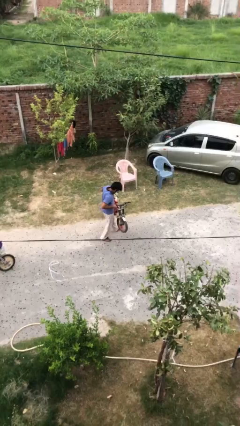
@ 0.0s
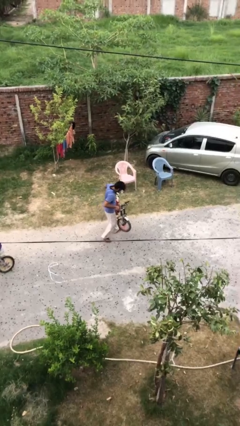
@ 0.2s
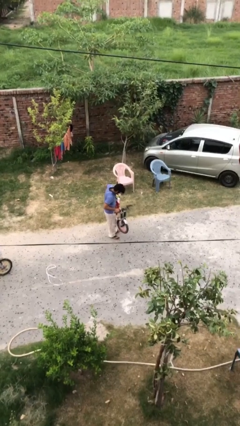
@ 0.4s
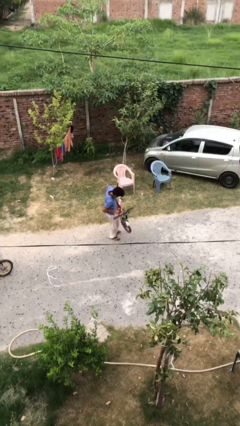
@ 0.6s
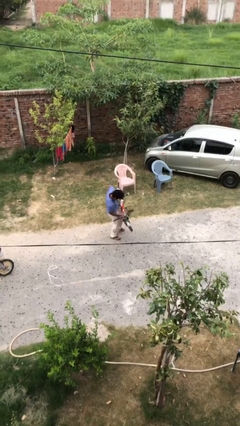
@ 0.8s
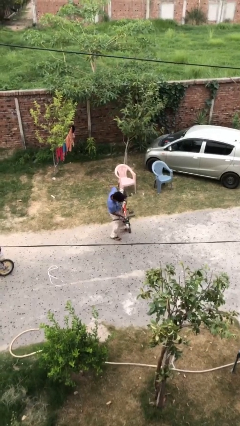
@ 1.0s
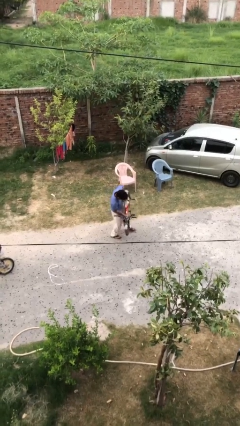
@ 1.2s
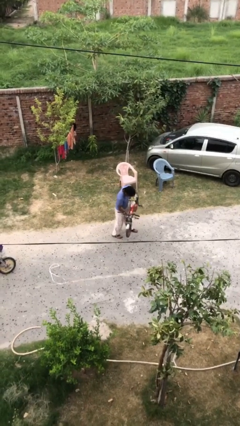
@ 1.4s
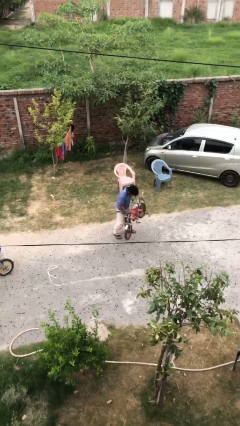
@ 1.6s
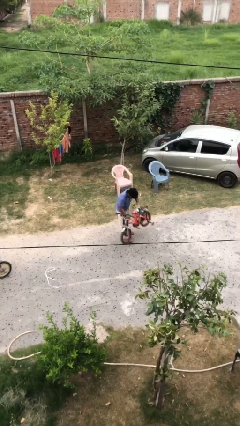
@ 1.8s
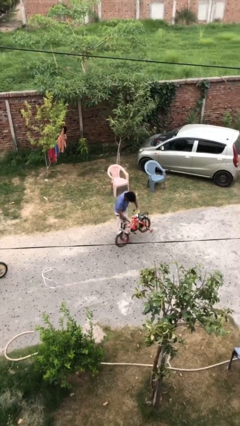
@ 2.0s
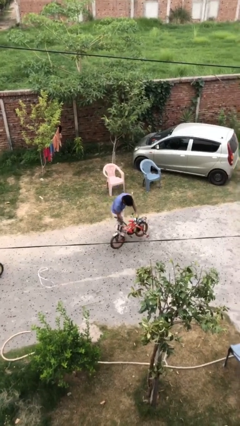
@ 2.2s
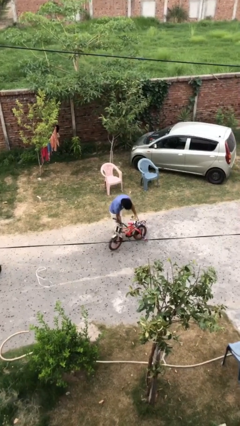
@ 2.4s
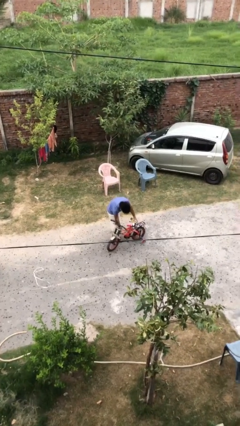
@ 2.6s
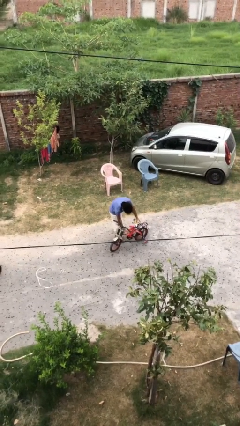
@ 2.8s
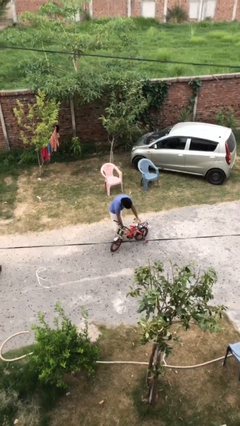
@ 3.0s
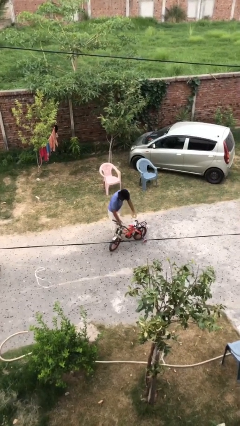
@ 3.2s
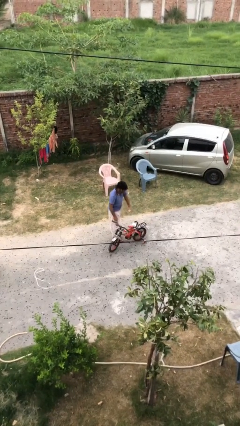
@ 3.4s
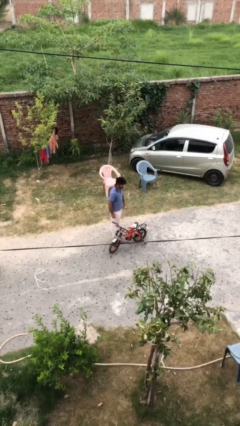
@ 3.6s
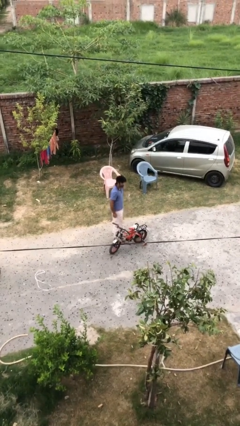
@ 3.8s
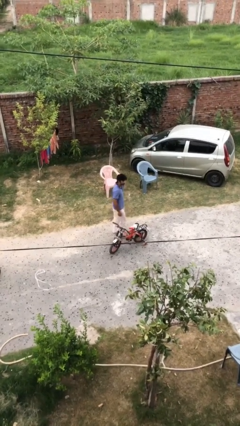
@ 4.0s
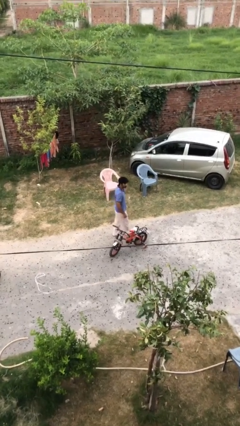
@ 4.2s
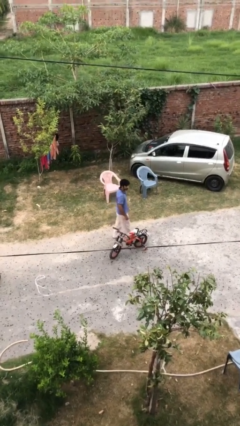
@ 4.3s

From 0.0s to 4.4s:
person puts down object on floor

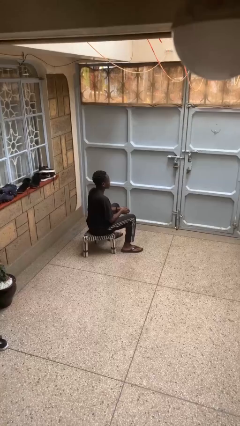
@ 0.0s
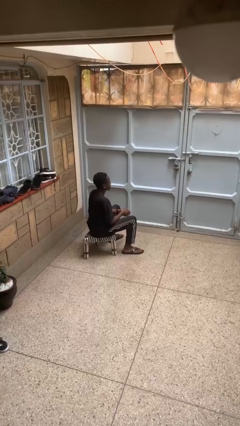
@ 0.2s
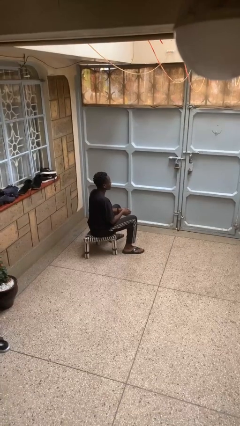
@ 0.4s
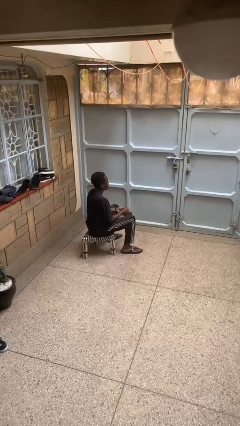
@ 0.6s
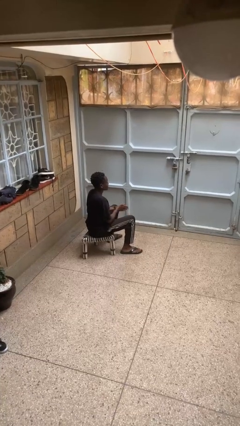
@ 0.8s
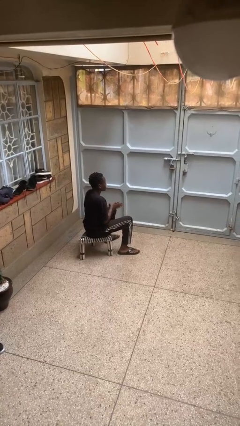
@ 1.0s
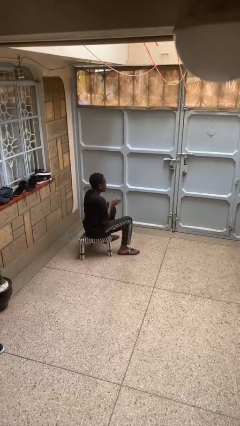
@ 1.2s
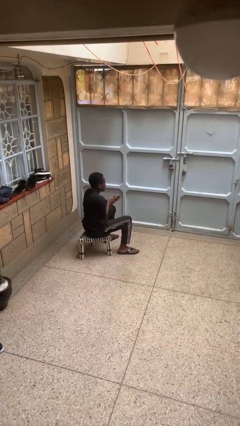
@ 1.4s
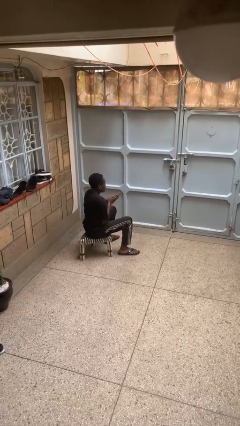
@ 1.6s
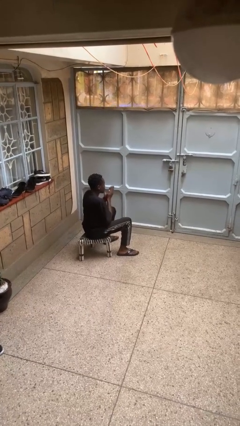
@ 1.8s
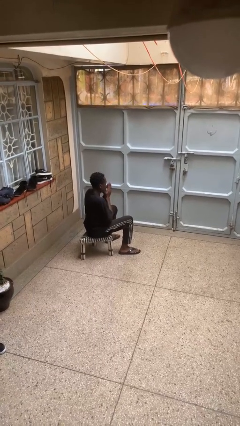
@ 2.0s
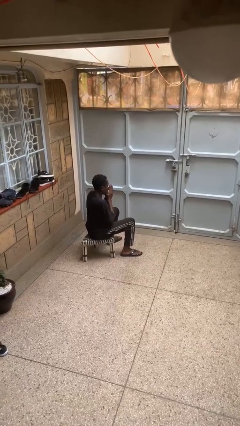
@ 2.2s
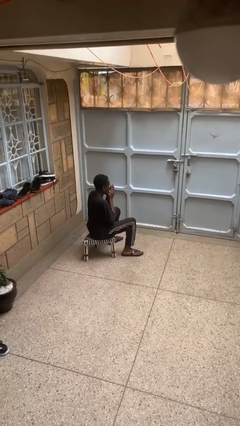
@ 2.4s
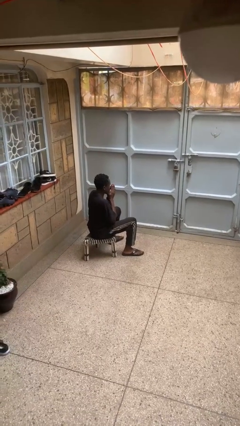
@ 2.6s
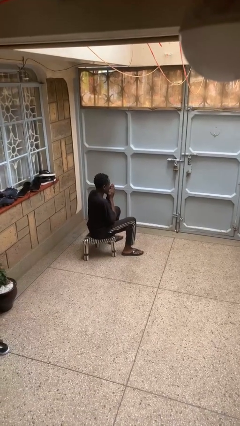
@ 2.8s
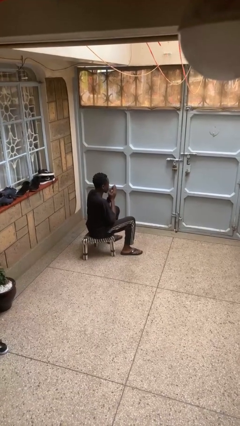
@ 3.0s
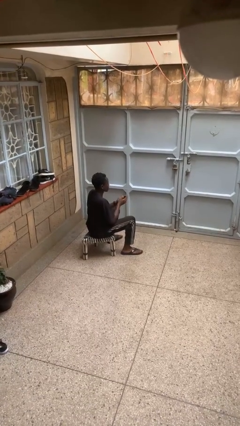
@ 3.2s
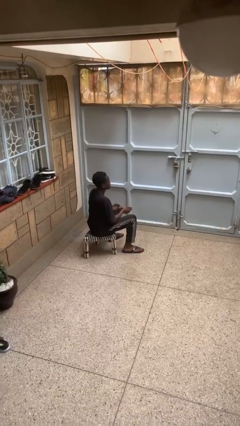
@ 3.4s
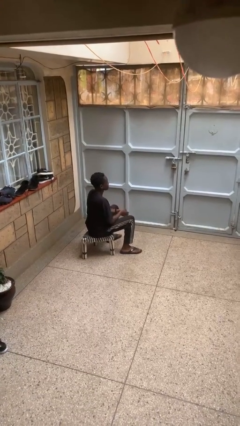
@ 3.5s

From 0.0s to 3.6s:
person blows into hands

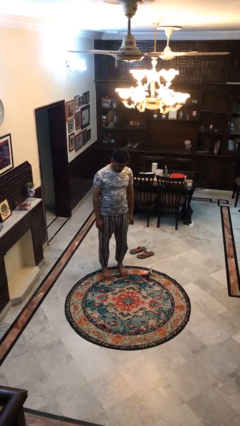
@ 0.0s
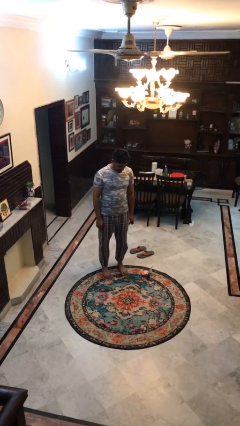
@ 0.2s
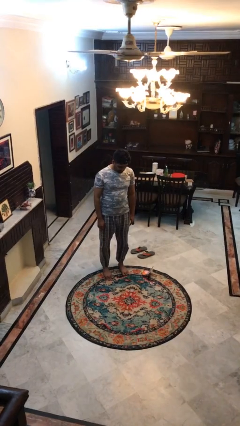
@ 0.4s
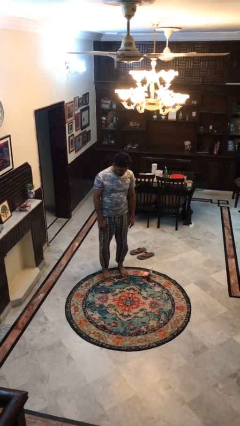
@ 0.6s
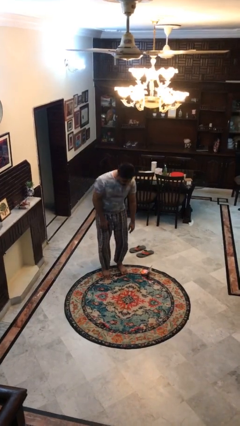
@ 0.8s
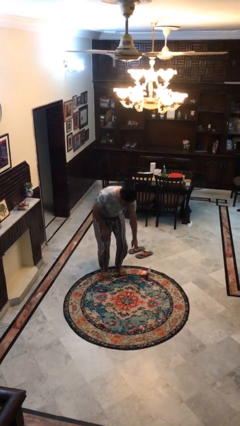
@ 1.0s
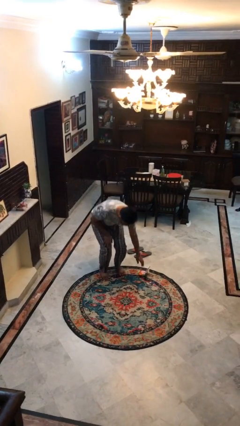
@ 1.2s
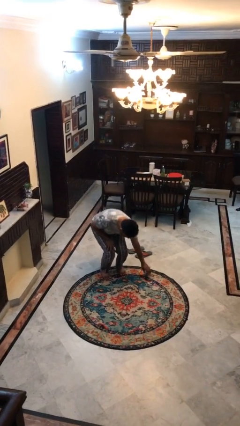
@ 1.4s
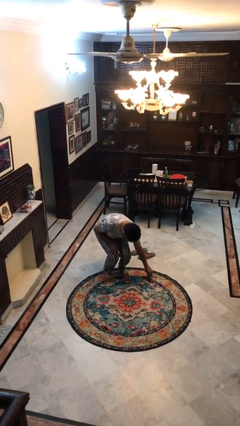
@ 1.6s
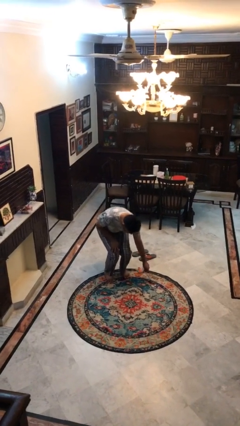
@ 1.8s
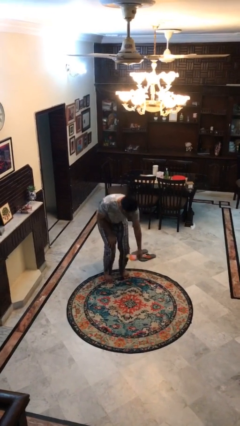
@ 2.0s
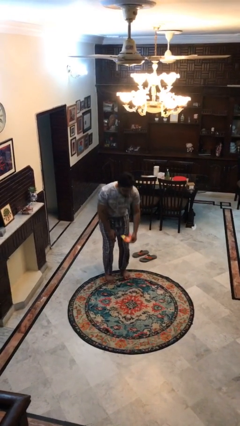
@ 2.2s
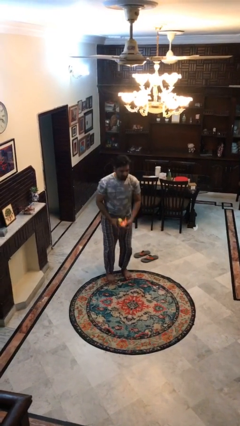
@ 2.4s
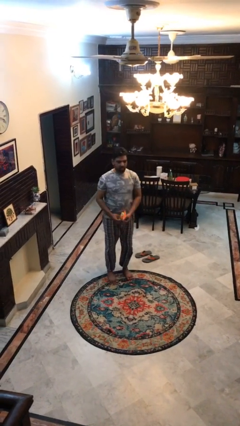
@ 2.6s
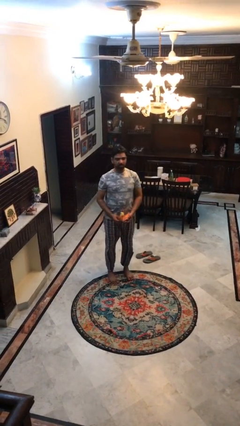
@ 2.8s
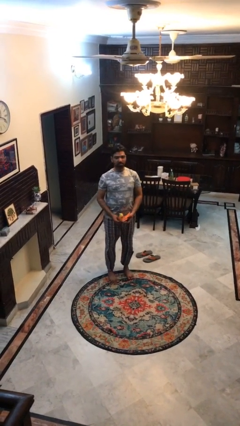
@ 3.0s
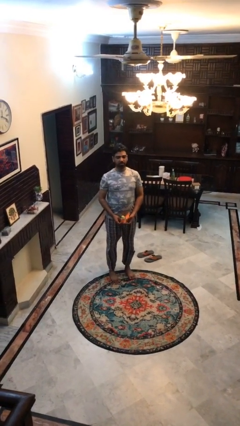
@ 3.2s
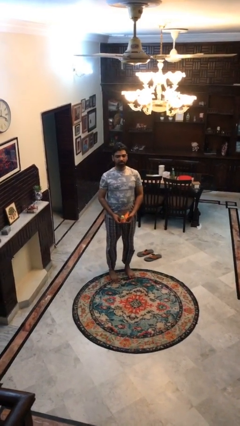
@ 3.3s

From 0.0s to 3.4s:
person picks up object from floor

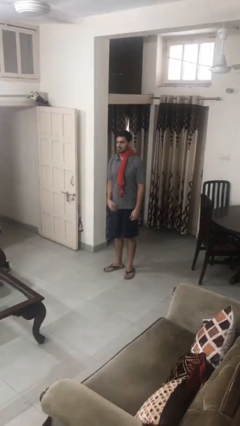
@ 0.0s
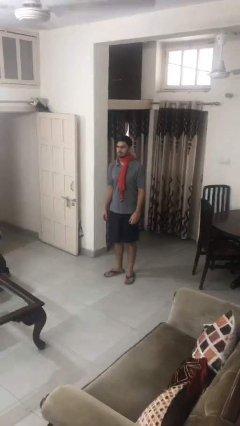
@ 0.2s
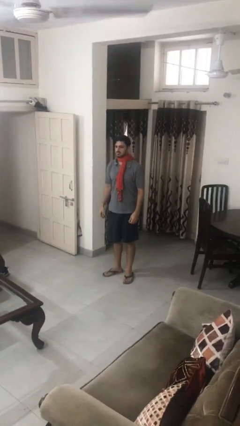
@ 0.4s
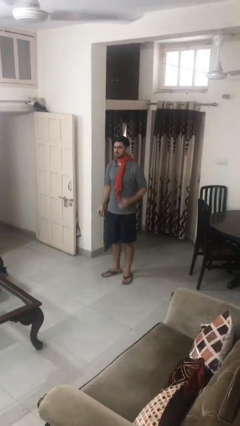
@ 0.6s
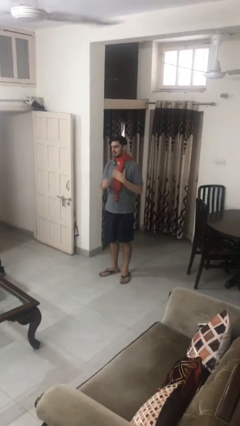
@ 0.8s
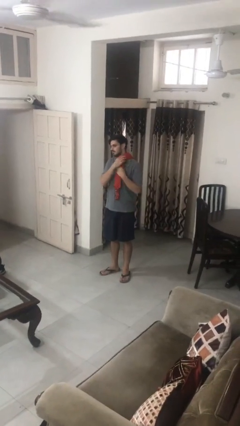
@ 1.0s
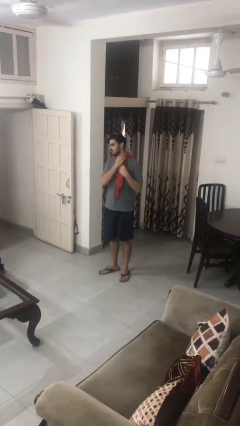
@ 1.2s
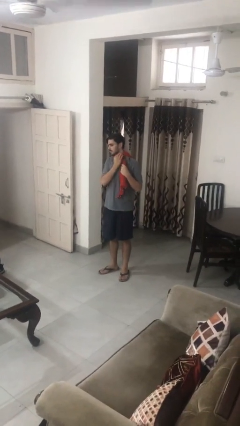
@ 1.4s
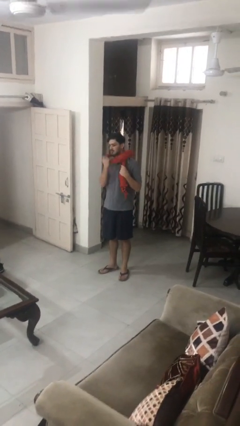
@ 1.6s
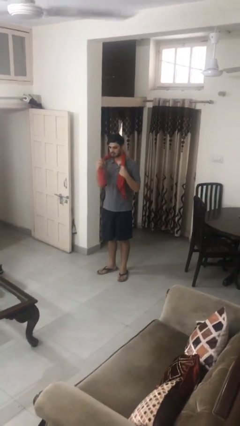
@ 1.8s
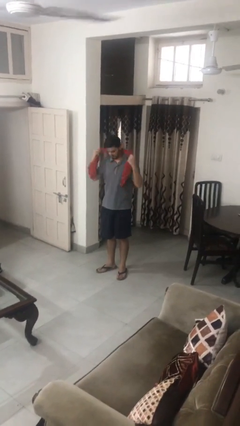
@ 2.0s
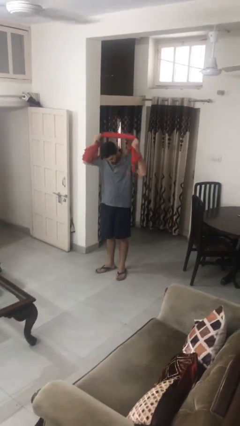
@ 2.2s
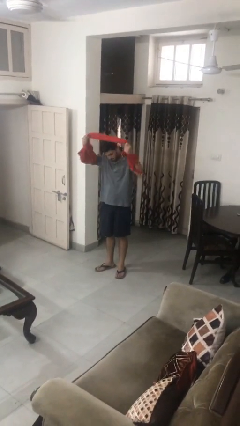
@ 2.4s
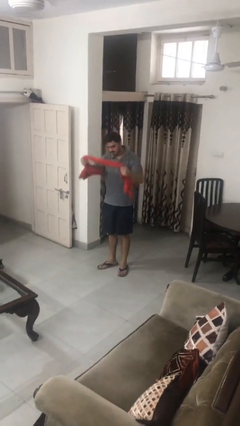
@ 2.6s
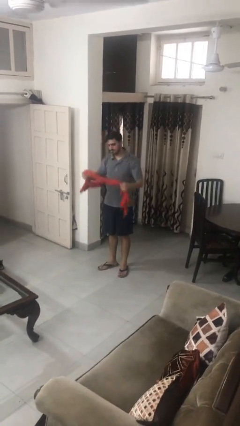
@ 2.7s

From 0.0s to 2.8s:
person takes off scarf

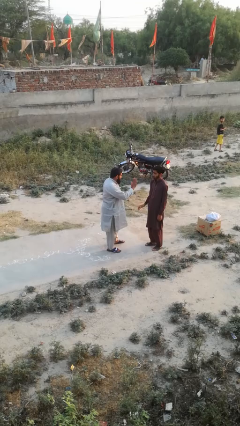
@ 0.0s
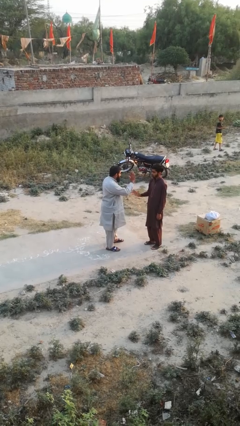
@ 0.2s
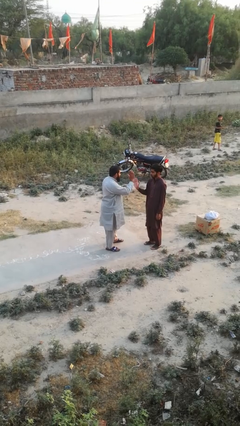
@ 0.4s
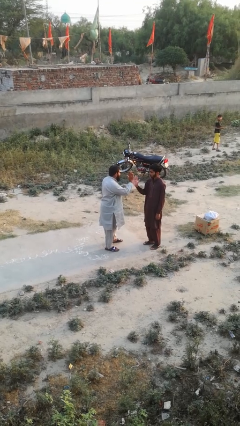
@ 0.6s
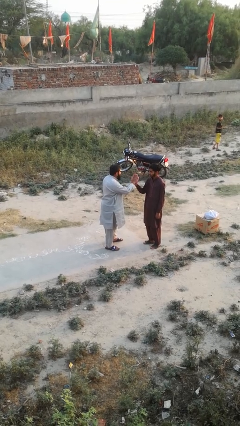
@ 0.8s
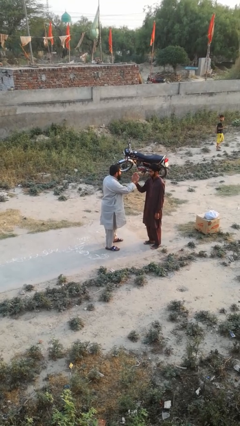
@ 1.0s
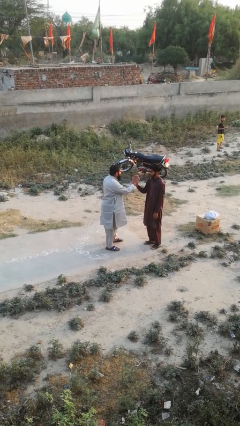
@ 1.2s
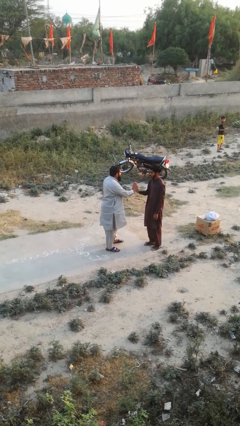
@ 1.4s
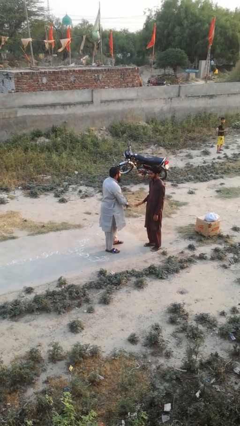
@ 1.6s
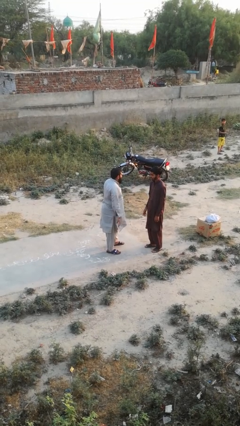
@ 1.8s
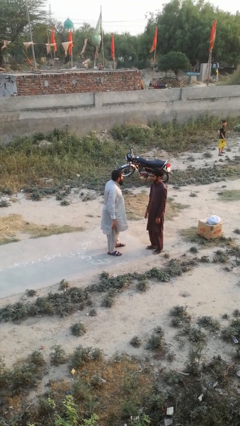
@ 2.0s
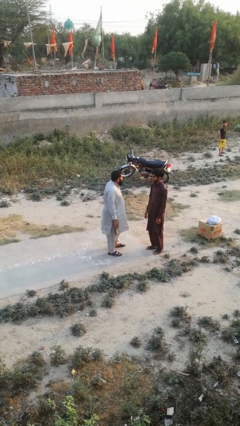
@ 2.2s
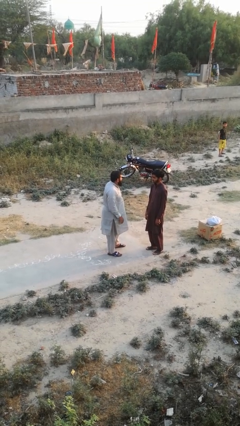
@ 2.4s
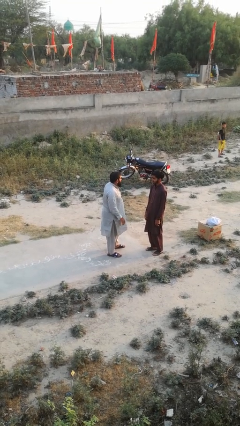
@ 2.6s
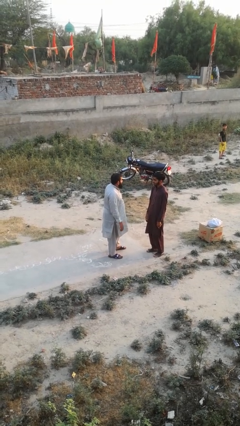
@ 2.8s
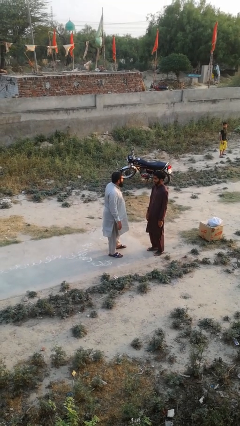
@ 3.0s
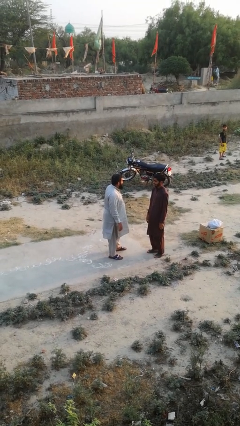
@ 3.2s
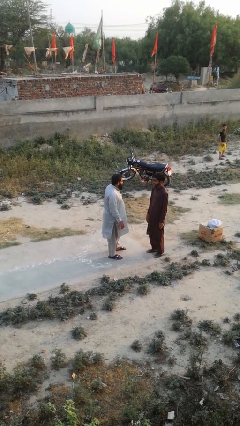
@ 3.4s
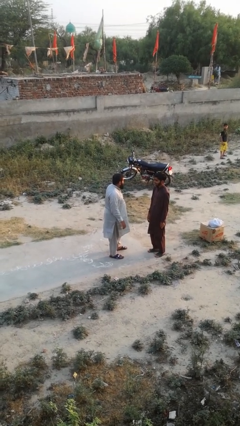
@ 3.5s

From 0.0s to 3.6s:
person highfives hand
